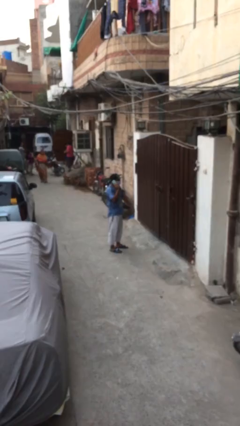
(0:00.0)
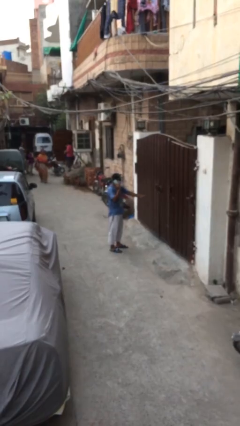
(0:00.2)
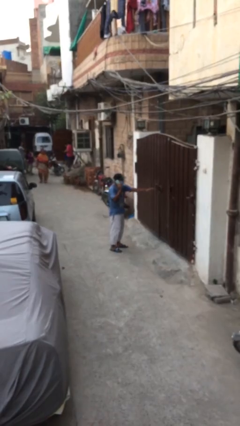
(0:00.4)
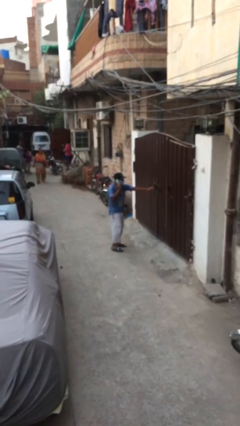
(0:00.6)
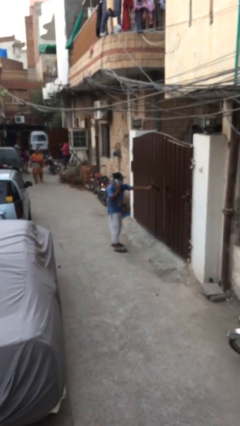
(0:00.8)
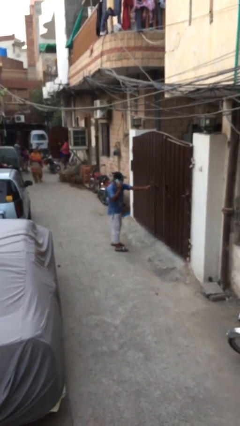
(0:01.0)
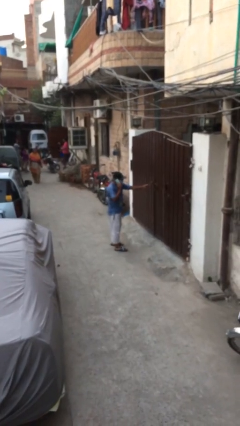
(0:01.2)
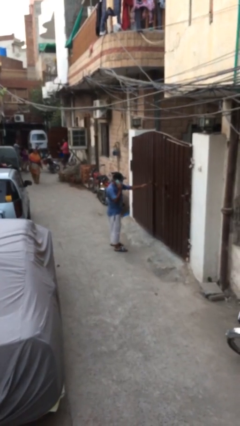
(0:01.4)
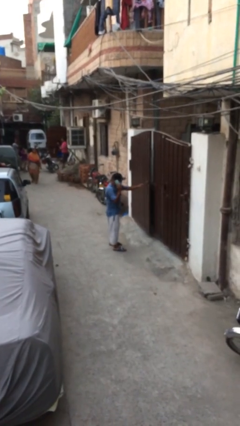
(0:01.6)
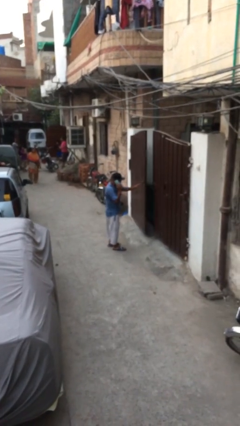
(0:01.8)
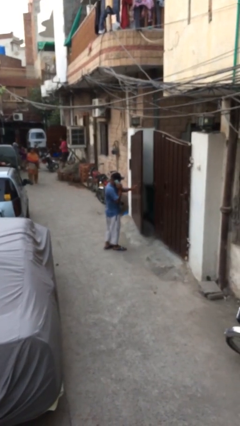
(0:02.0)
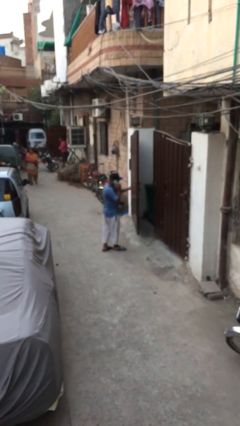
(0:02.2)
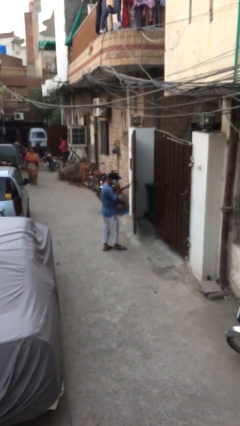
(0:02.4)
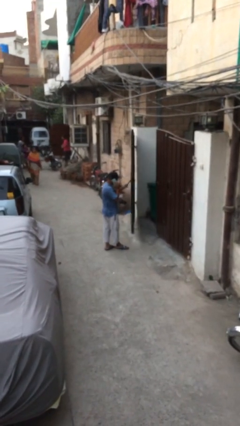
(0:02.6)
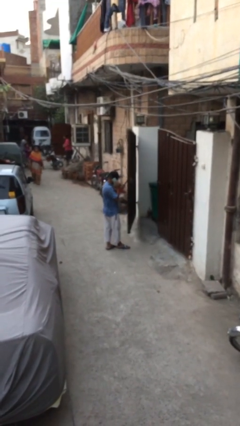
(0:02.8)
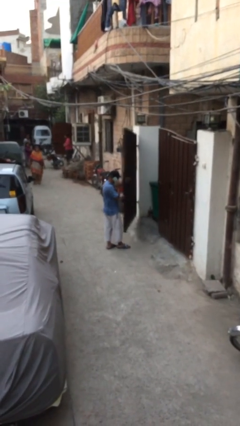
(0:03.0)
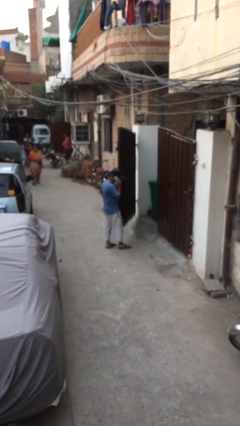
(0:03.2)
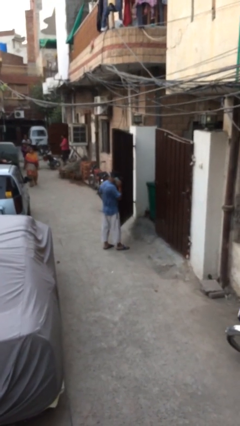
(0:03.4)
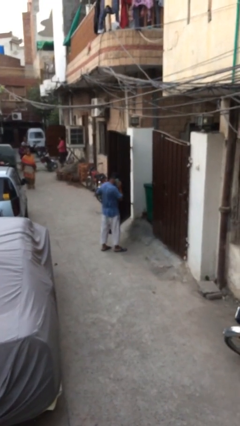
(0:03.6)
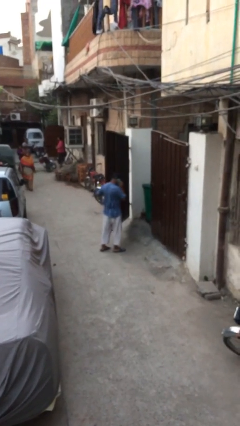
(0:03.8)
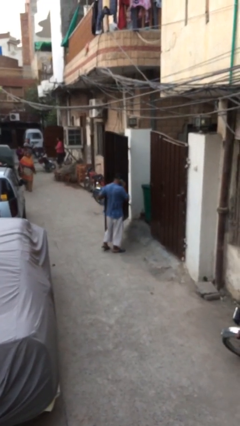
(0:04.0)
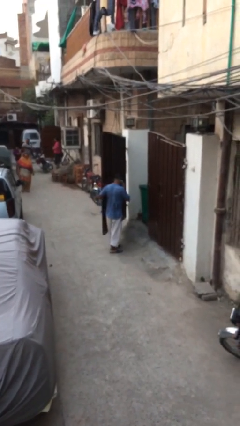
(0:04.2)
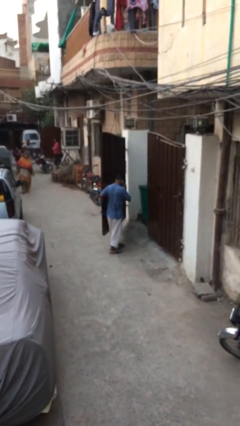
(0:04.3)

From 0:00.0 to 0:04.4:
person opens facility door

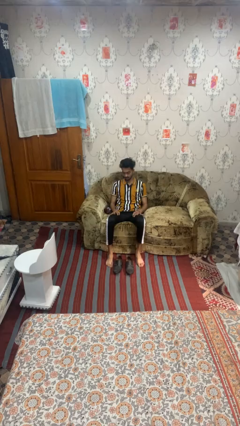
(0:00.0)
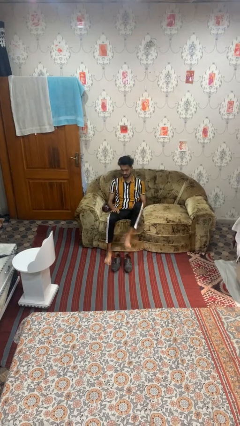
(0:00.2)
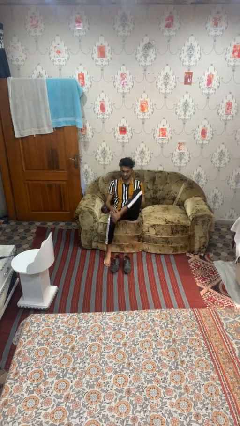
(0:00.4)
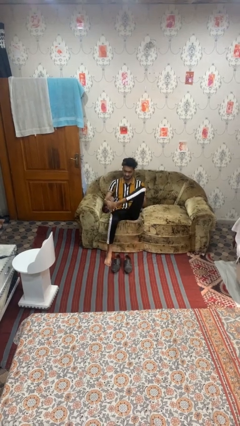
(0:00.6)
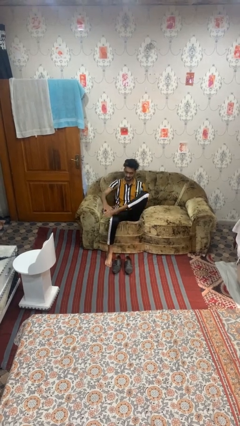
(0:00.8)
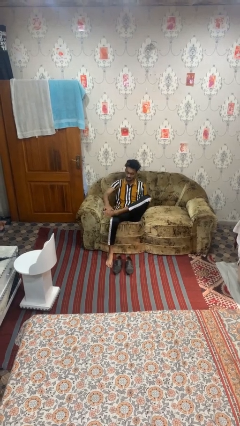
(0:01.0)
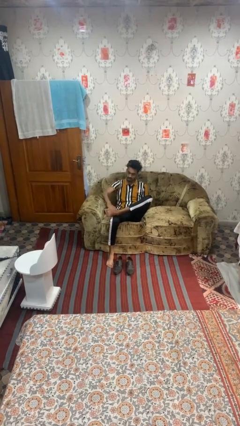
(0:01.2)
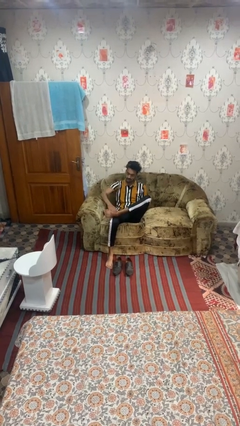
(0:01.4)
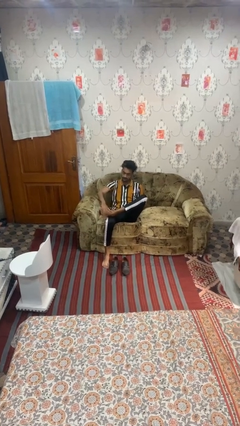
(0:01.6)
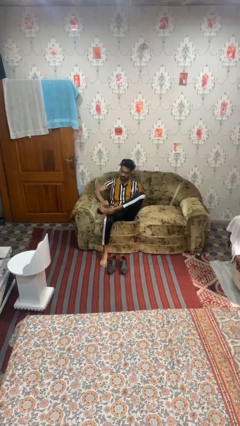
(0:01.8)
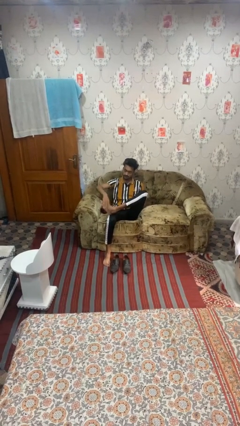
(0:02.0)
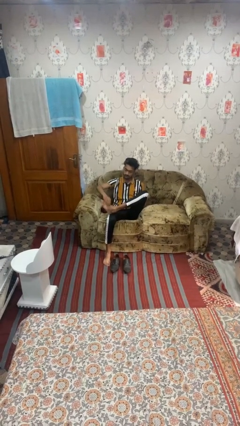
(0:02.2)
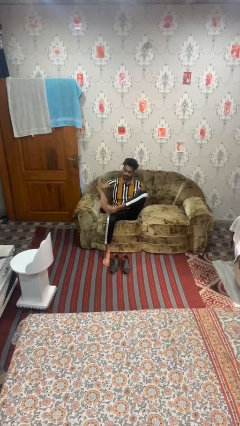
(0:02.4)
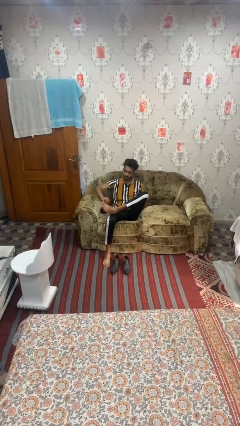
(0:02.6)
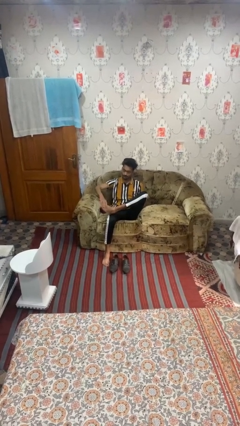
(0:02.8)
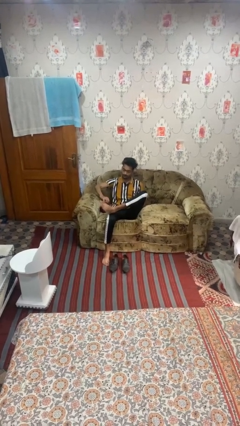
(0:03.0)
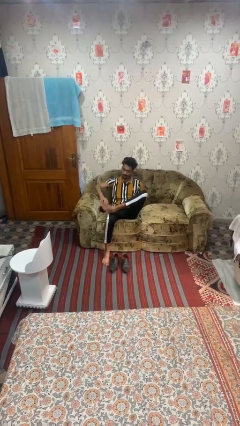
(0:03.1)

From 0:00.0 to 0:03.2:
person rubs foot

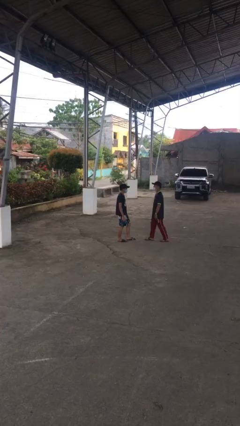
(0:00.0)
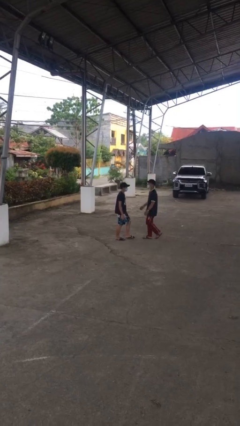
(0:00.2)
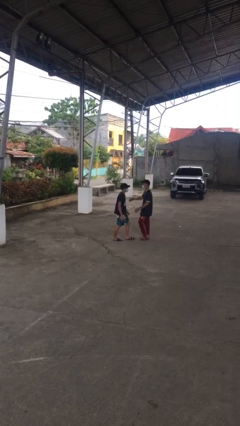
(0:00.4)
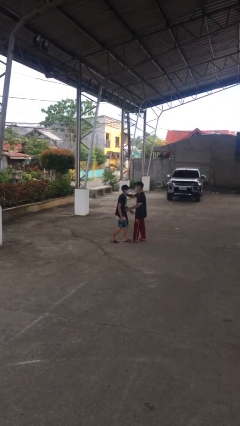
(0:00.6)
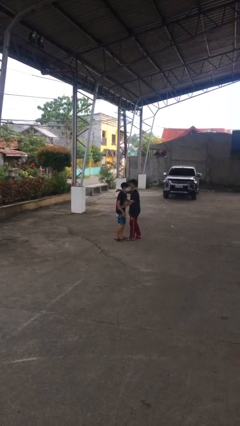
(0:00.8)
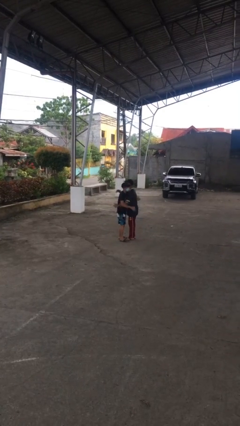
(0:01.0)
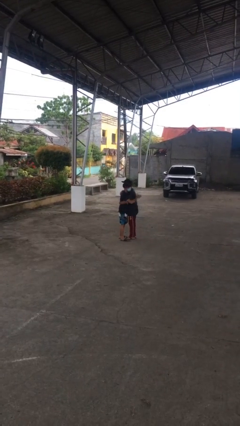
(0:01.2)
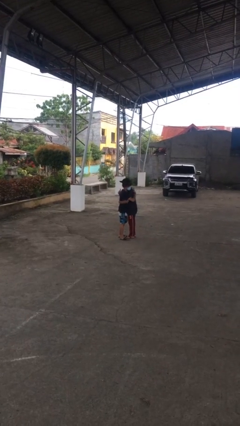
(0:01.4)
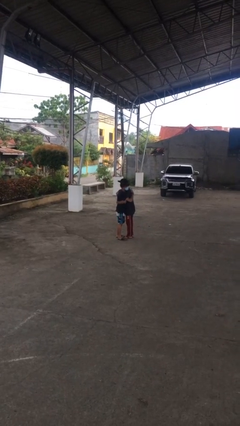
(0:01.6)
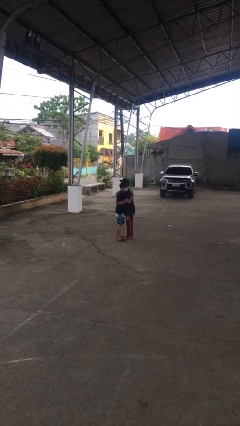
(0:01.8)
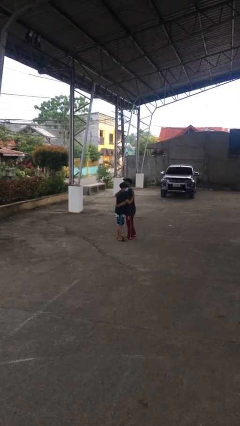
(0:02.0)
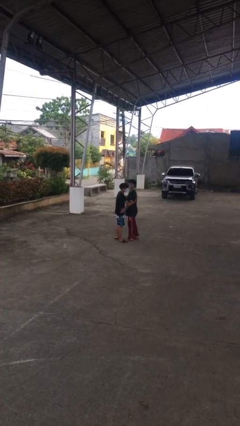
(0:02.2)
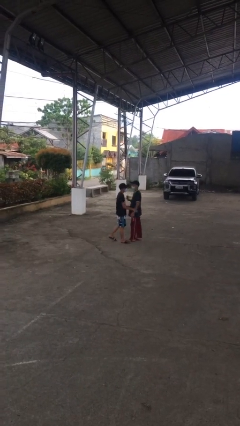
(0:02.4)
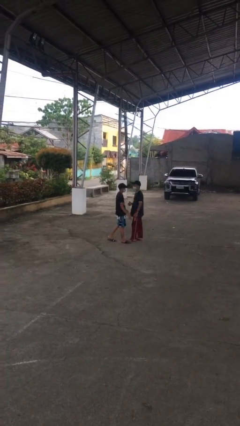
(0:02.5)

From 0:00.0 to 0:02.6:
person embraces person

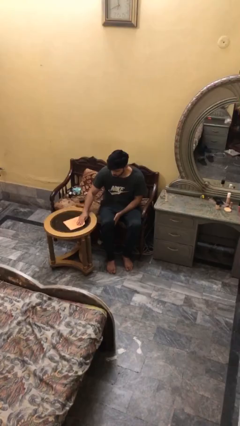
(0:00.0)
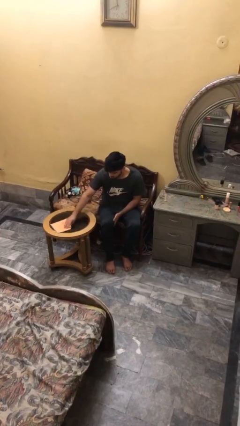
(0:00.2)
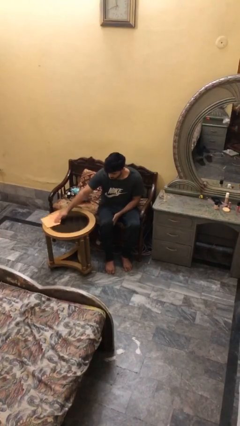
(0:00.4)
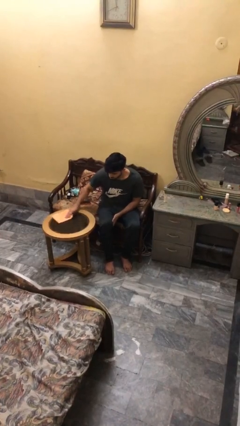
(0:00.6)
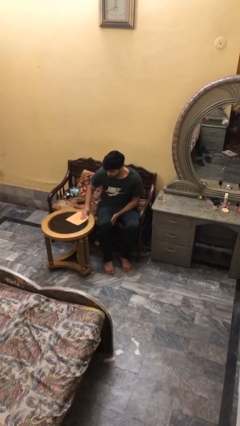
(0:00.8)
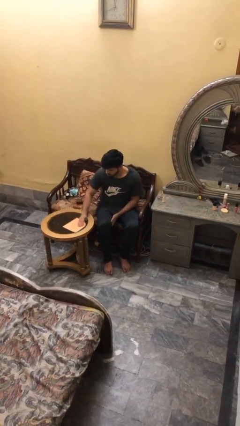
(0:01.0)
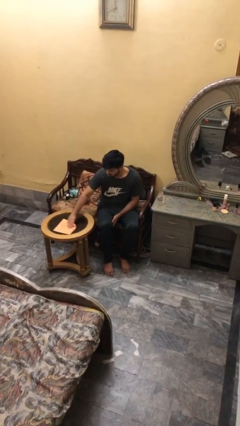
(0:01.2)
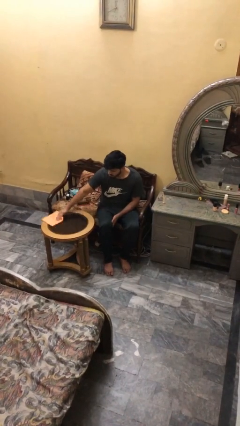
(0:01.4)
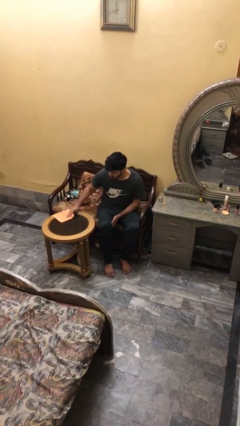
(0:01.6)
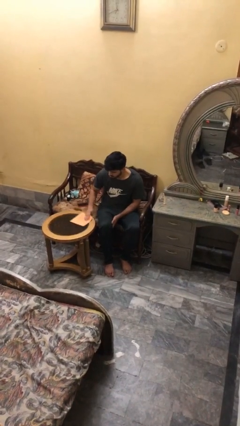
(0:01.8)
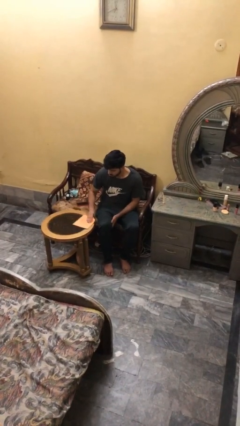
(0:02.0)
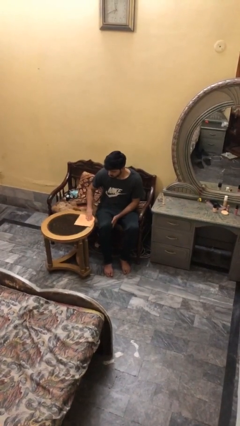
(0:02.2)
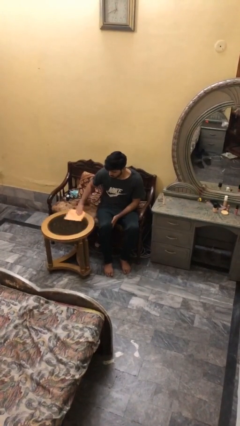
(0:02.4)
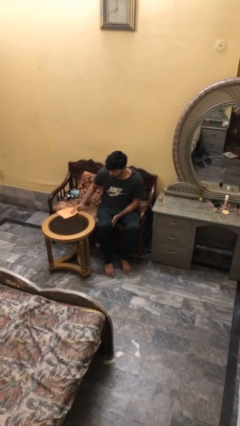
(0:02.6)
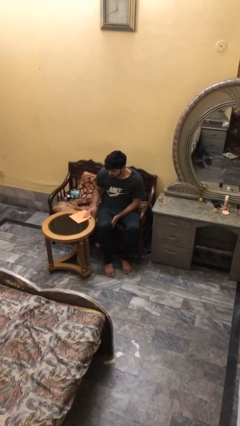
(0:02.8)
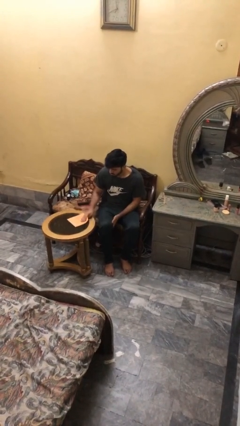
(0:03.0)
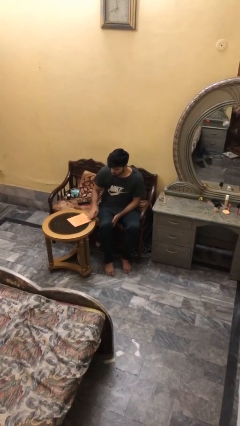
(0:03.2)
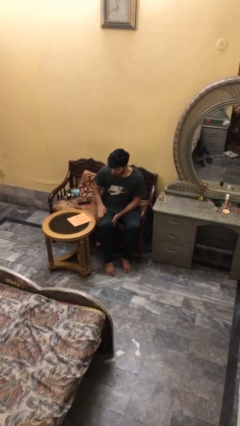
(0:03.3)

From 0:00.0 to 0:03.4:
person cleans table with rag

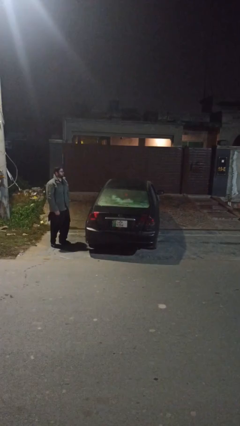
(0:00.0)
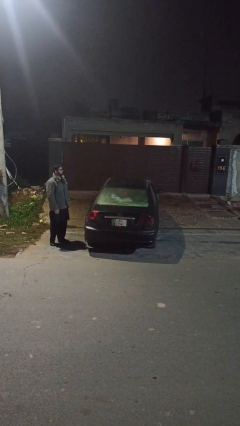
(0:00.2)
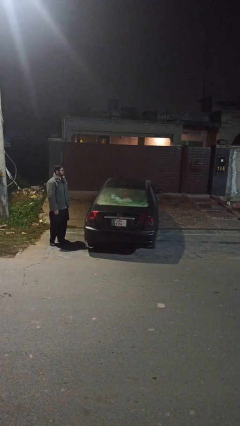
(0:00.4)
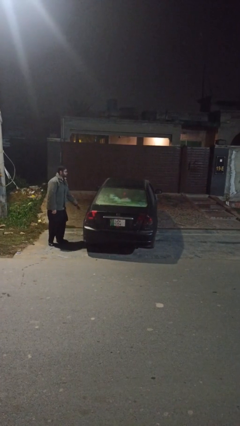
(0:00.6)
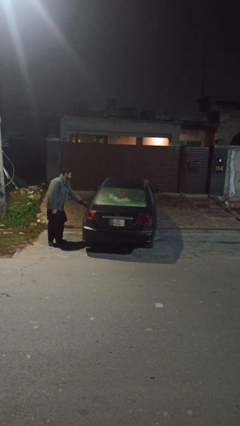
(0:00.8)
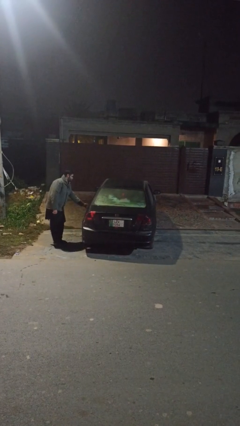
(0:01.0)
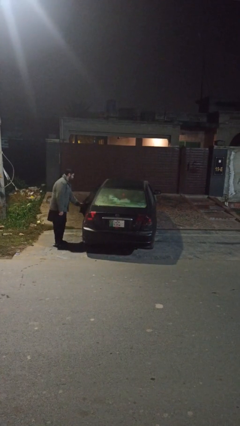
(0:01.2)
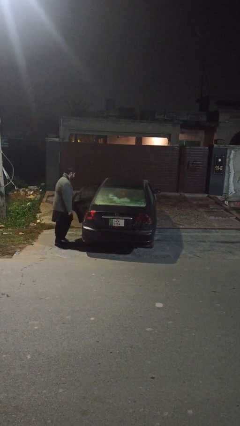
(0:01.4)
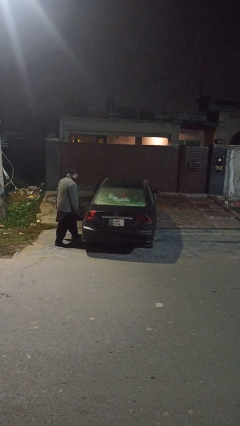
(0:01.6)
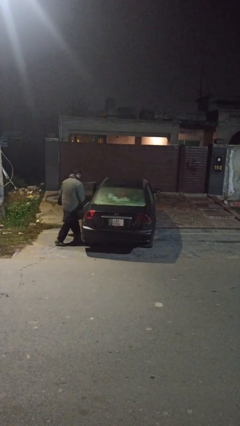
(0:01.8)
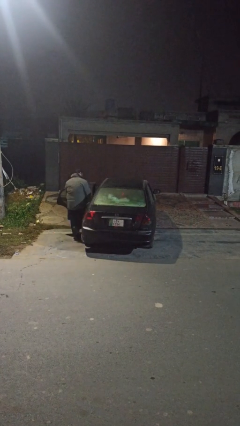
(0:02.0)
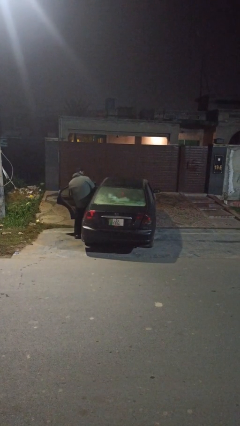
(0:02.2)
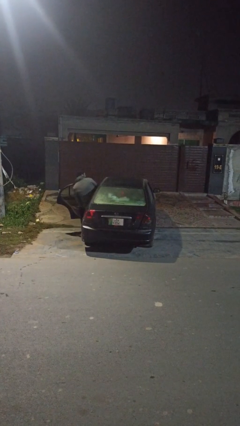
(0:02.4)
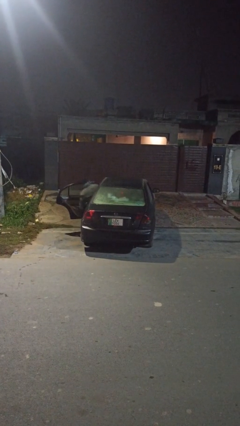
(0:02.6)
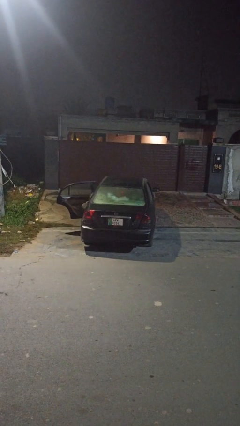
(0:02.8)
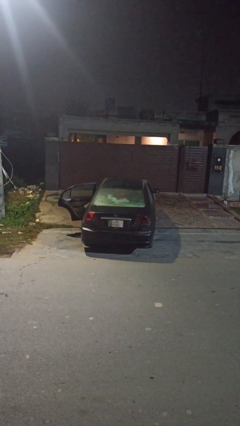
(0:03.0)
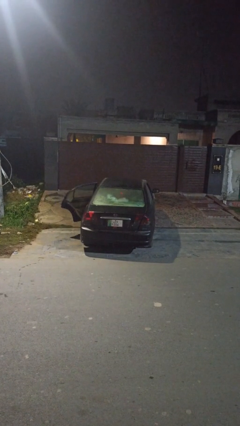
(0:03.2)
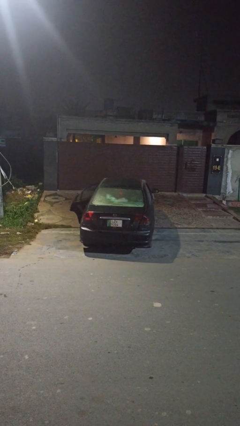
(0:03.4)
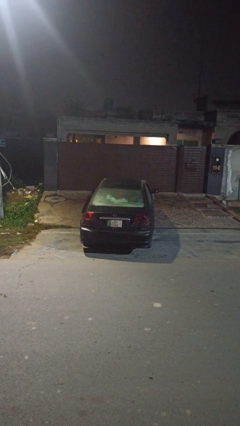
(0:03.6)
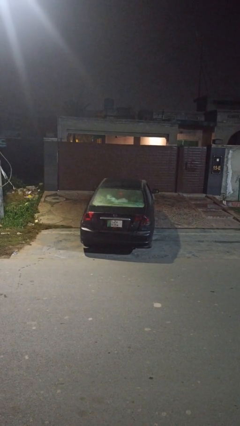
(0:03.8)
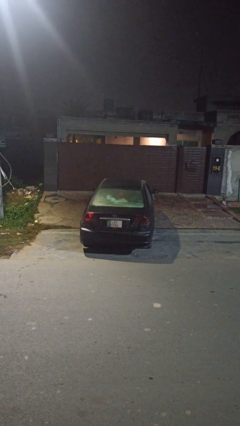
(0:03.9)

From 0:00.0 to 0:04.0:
car picks up person

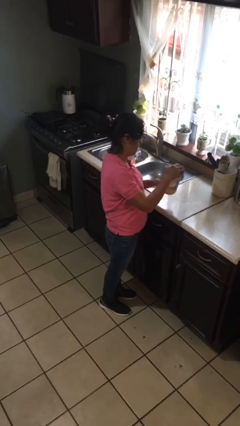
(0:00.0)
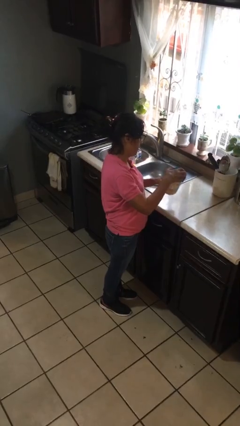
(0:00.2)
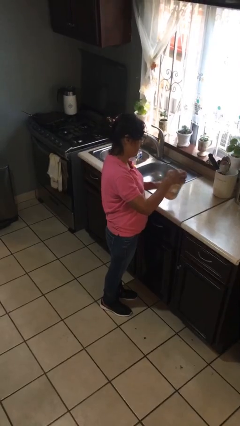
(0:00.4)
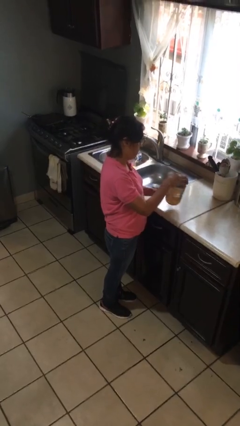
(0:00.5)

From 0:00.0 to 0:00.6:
person closes jar
